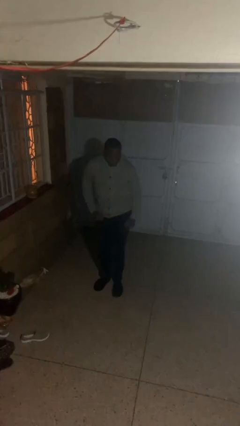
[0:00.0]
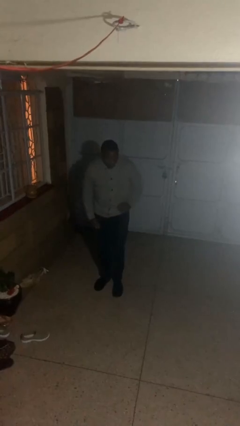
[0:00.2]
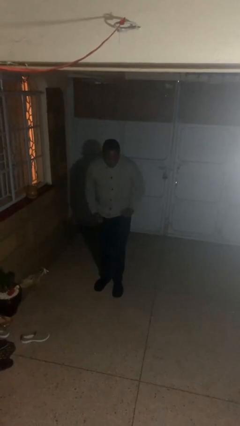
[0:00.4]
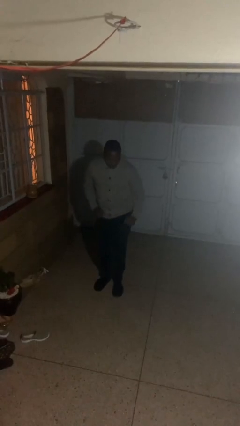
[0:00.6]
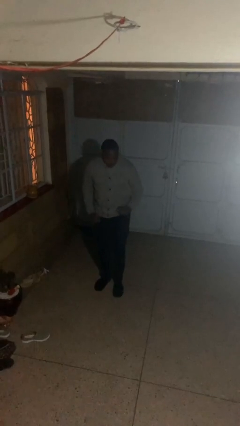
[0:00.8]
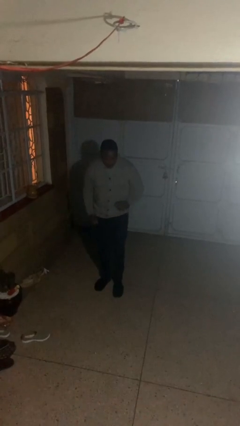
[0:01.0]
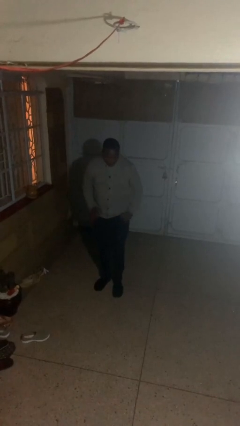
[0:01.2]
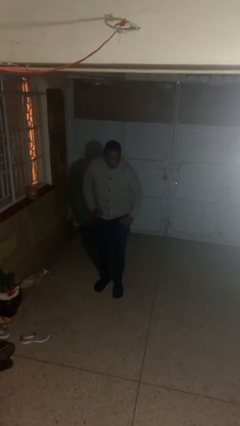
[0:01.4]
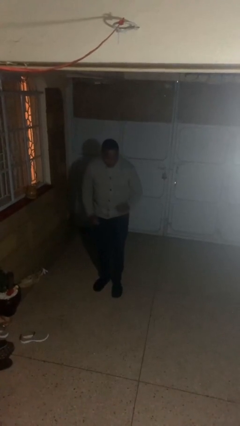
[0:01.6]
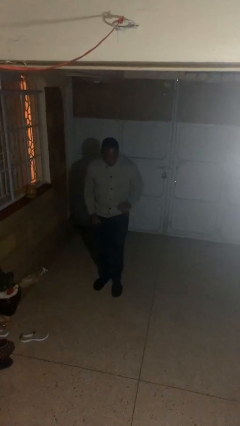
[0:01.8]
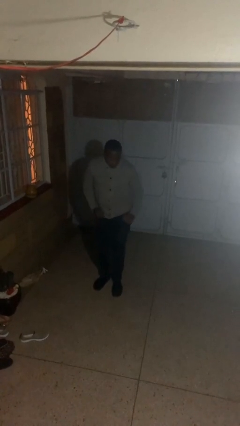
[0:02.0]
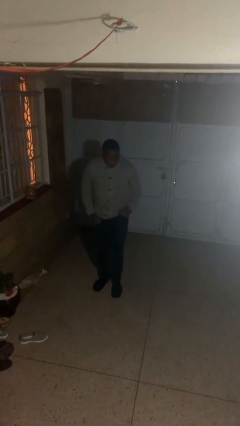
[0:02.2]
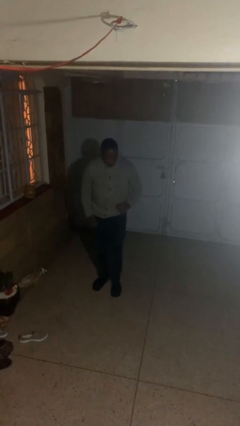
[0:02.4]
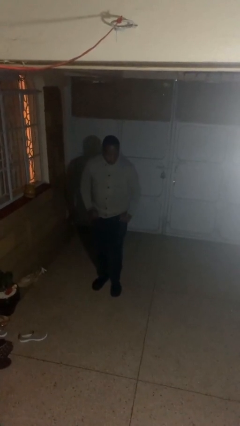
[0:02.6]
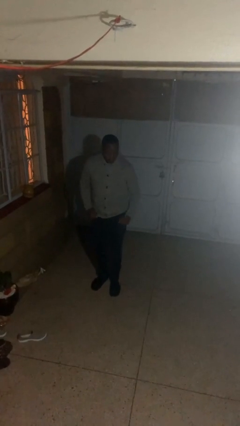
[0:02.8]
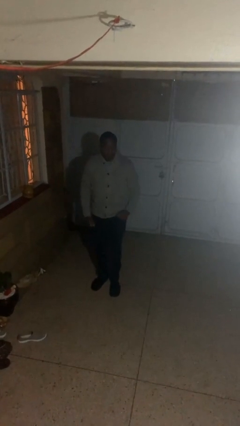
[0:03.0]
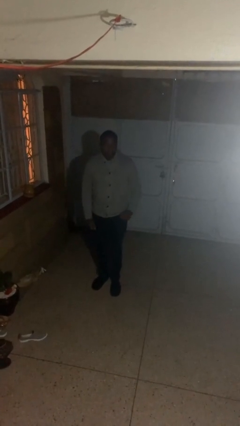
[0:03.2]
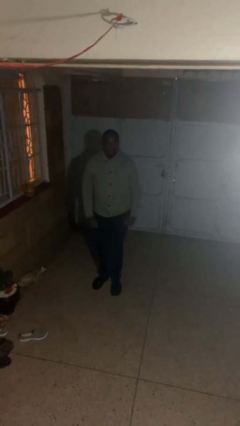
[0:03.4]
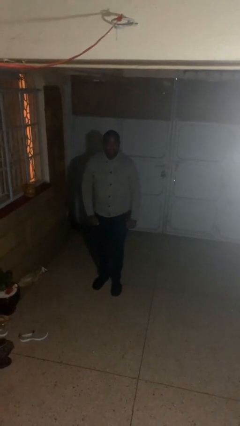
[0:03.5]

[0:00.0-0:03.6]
person dances in place

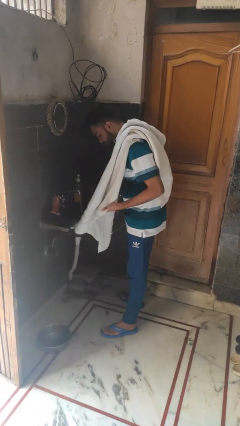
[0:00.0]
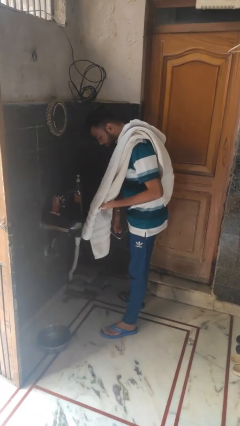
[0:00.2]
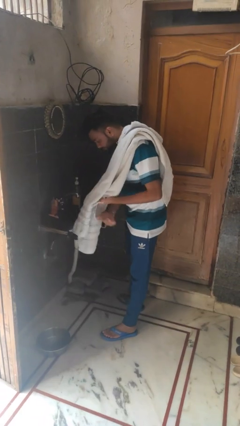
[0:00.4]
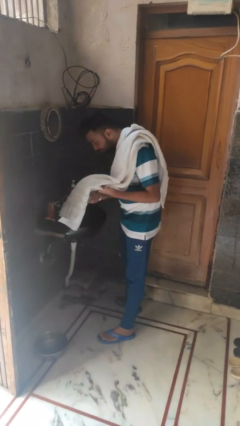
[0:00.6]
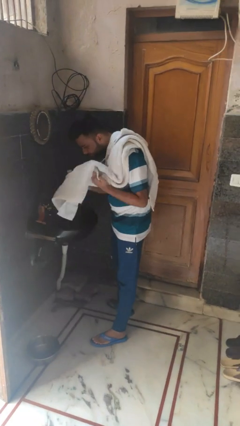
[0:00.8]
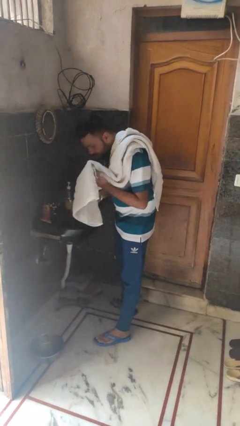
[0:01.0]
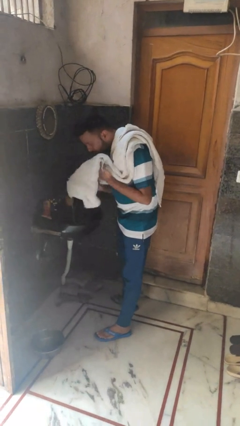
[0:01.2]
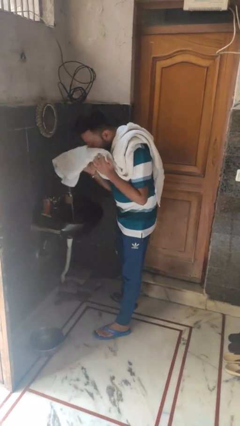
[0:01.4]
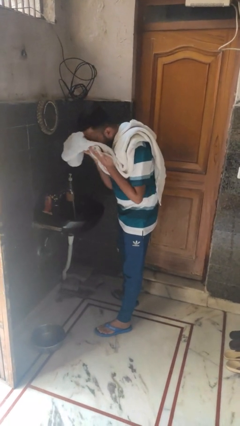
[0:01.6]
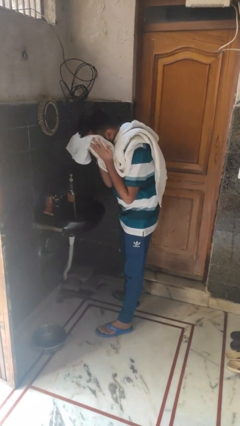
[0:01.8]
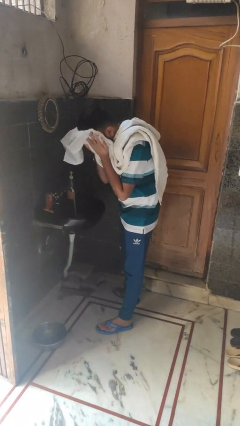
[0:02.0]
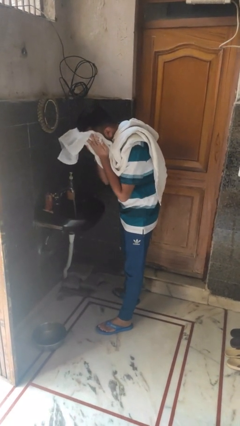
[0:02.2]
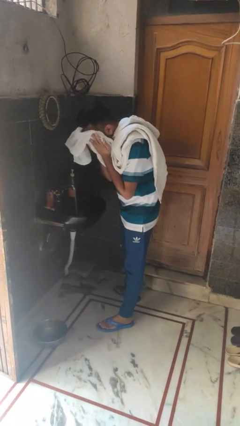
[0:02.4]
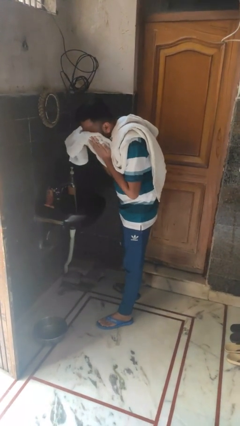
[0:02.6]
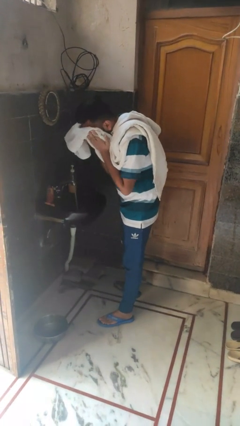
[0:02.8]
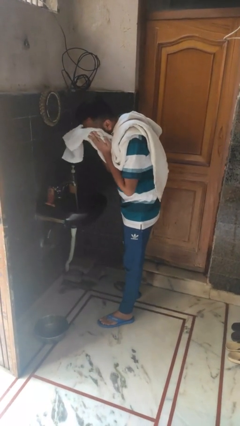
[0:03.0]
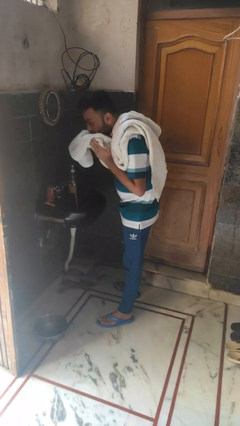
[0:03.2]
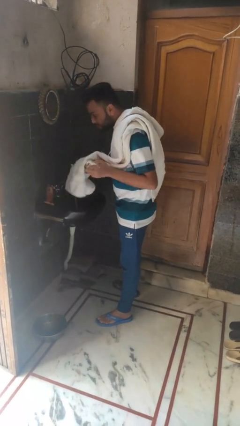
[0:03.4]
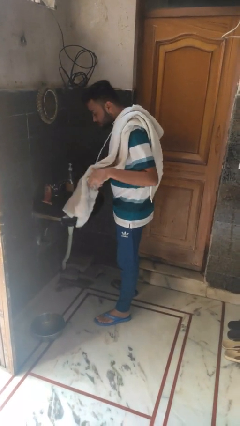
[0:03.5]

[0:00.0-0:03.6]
person dries face with towel

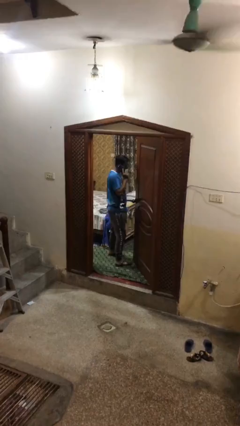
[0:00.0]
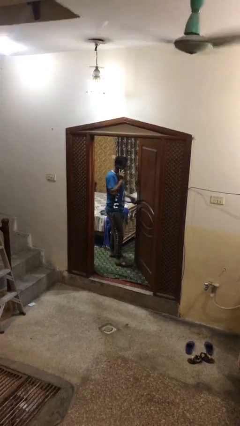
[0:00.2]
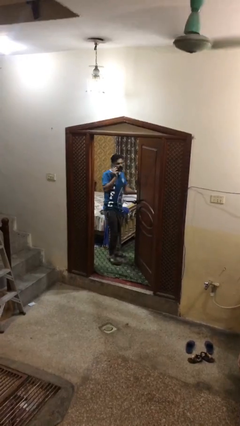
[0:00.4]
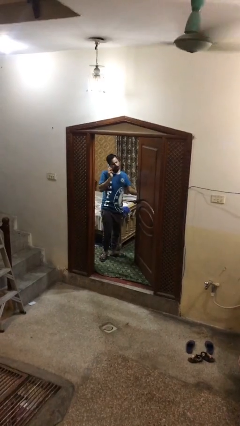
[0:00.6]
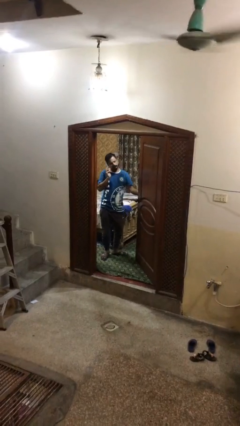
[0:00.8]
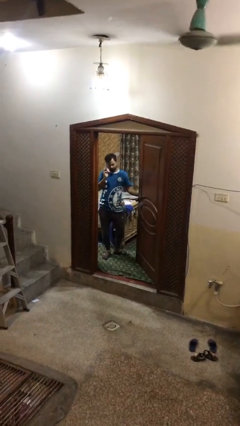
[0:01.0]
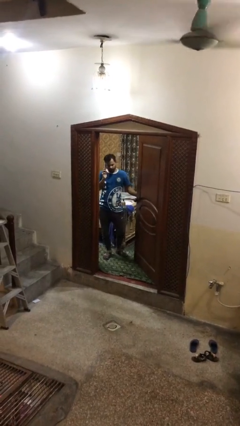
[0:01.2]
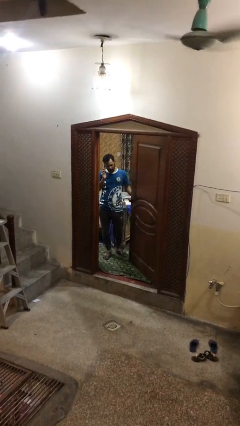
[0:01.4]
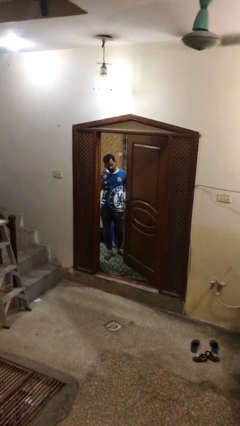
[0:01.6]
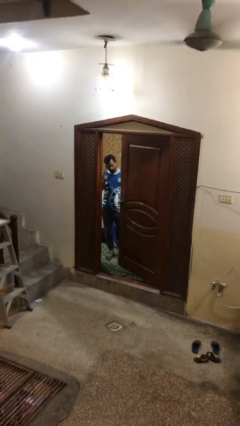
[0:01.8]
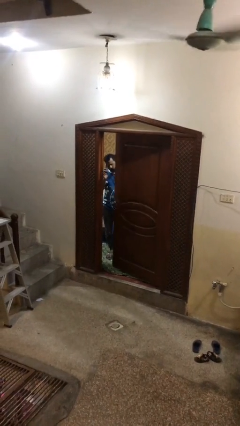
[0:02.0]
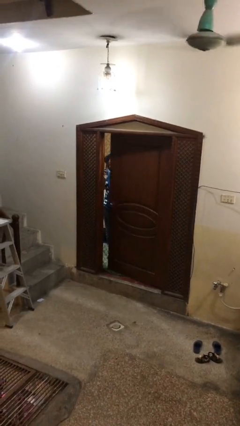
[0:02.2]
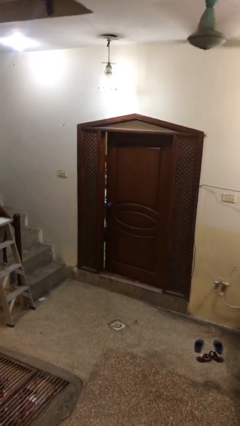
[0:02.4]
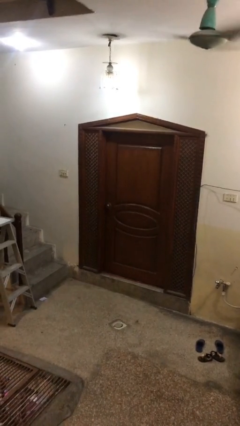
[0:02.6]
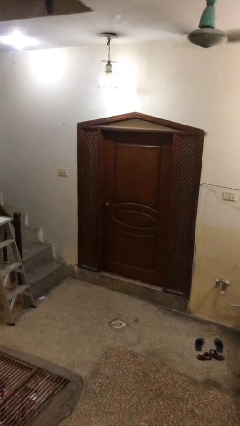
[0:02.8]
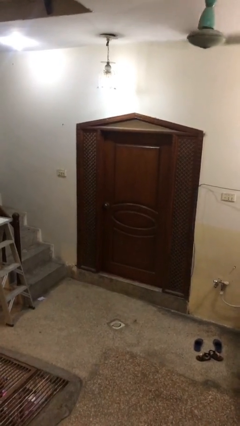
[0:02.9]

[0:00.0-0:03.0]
person closes facility door

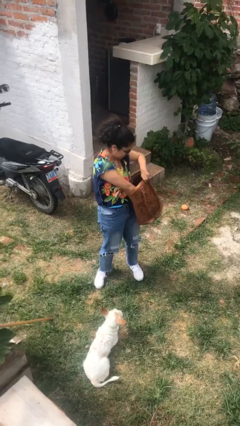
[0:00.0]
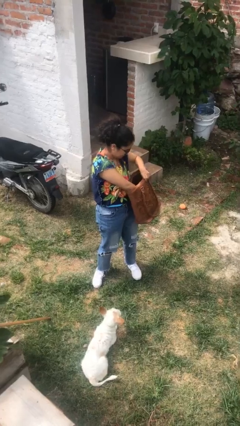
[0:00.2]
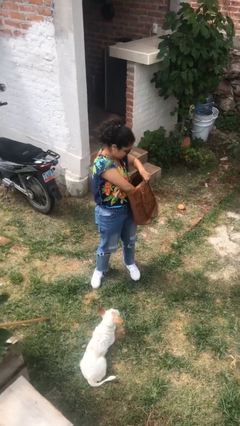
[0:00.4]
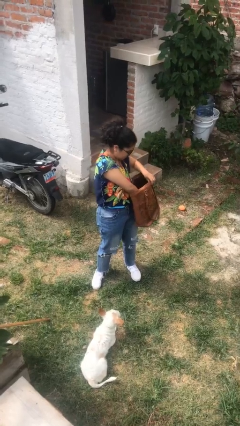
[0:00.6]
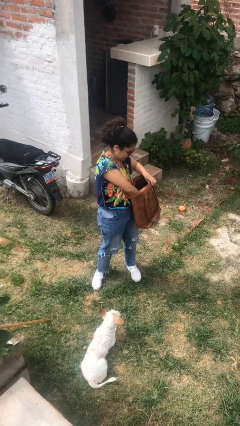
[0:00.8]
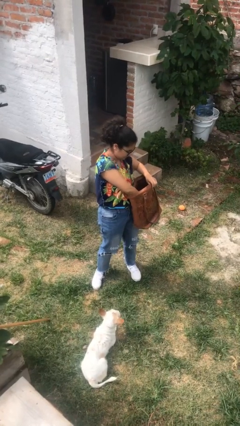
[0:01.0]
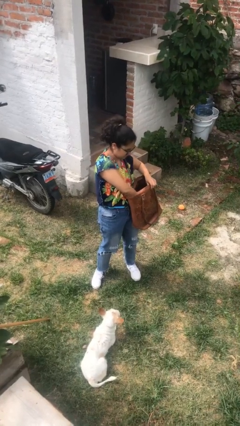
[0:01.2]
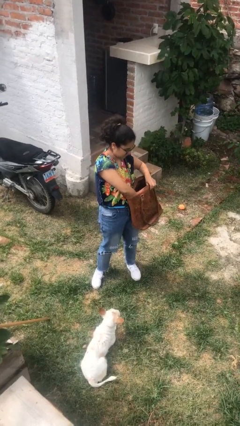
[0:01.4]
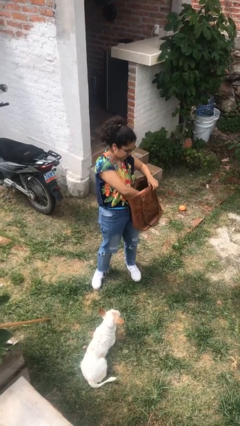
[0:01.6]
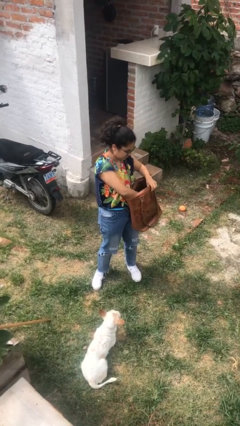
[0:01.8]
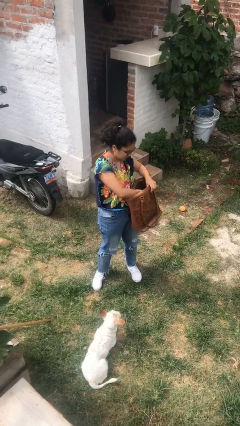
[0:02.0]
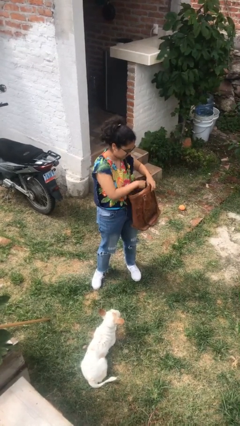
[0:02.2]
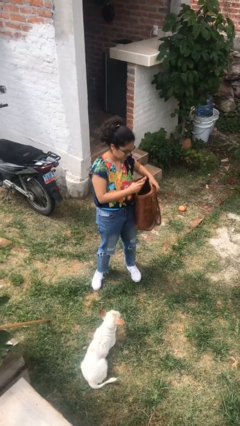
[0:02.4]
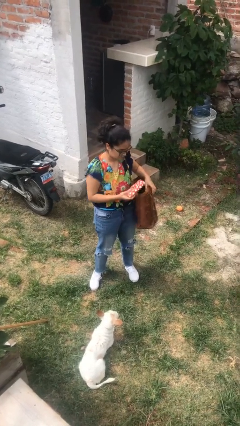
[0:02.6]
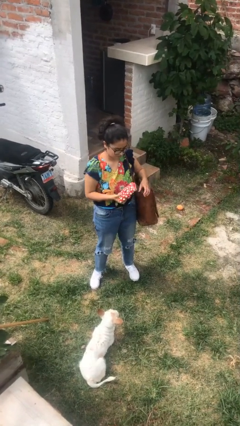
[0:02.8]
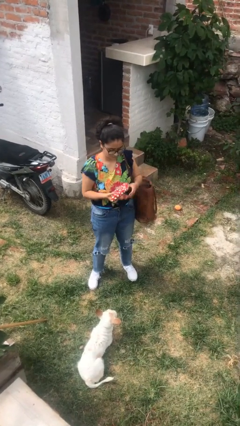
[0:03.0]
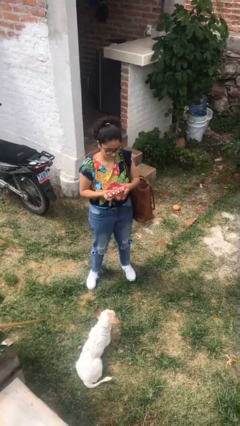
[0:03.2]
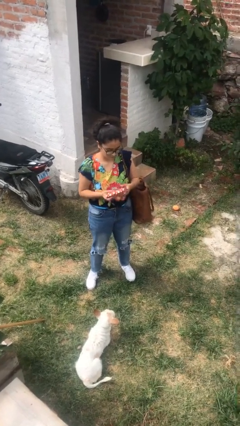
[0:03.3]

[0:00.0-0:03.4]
person takes object from purse

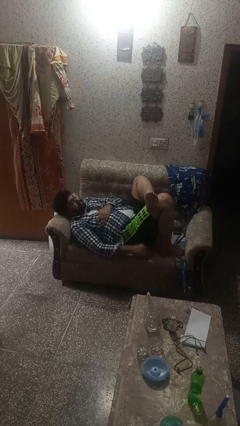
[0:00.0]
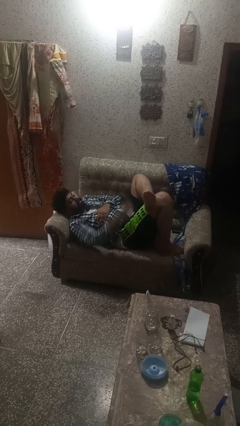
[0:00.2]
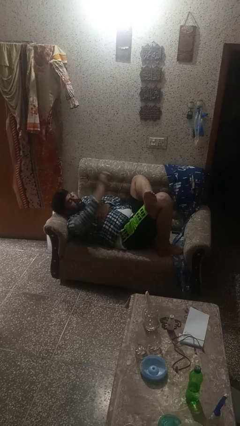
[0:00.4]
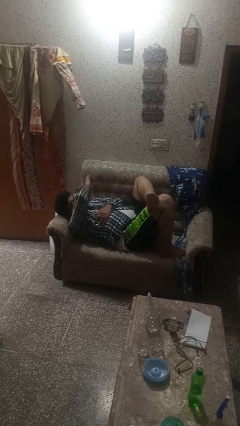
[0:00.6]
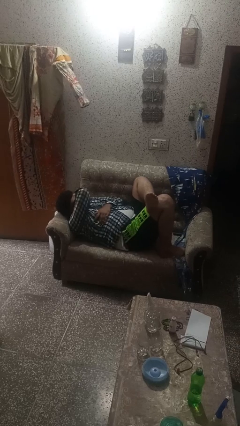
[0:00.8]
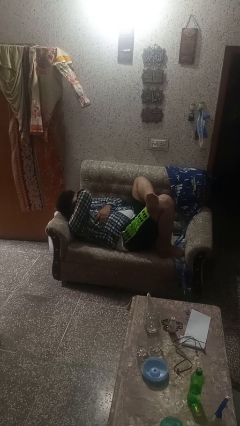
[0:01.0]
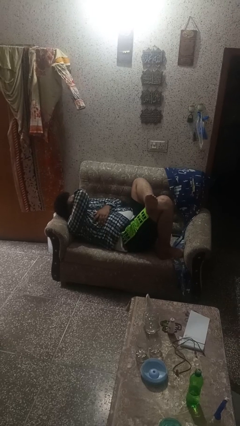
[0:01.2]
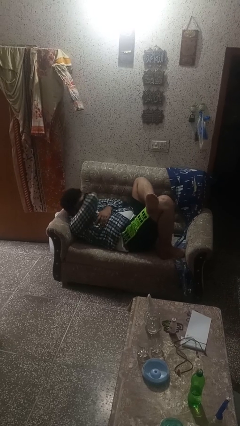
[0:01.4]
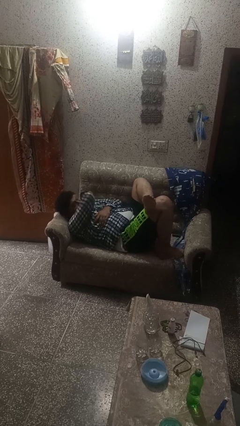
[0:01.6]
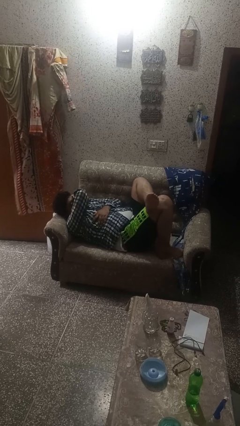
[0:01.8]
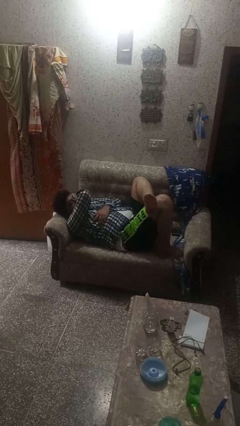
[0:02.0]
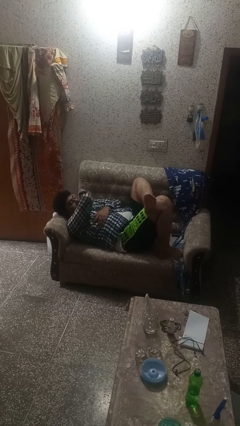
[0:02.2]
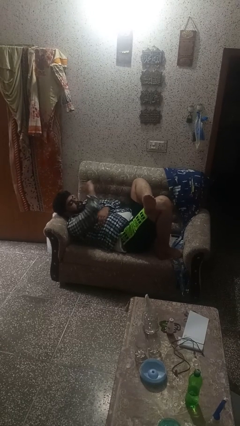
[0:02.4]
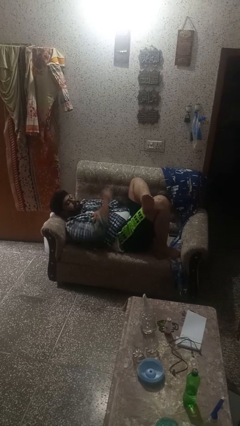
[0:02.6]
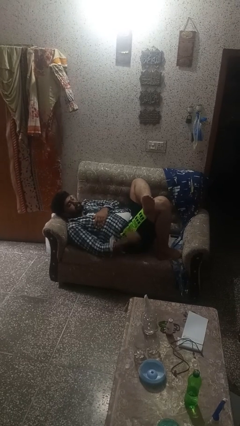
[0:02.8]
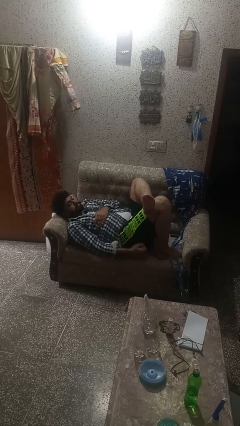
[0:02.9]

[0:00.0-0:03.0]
person sneezes into arm

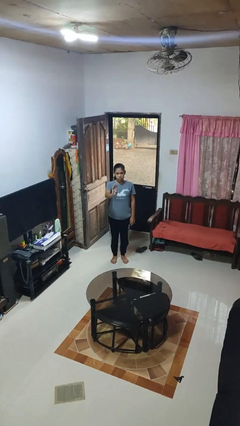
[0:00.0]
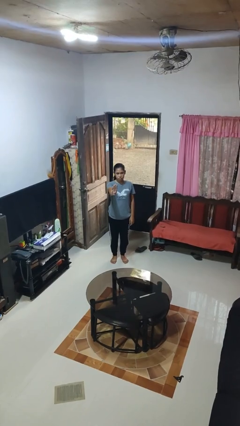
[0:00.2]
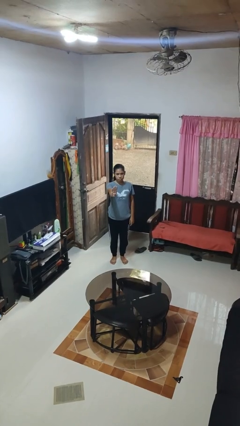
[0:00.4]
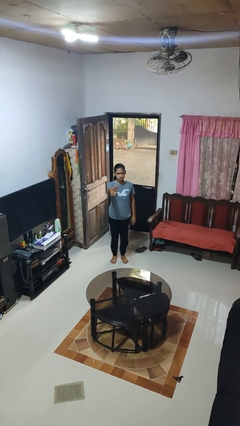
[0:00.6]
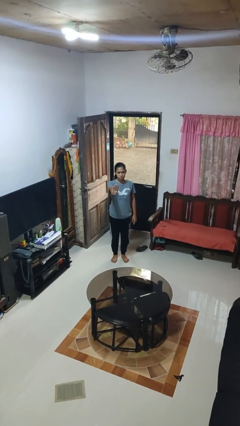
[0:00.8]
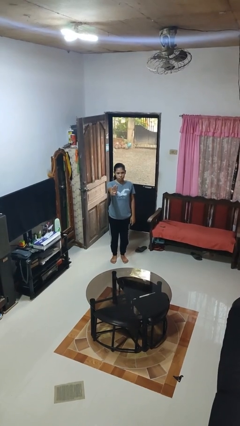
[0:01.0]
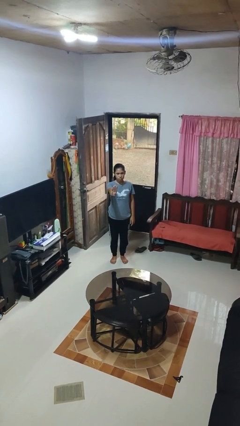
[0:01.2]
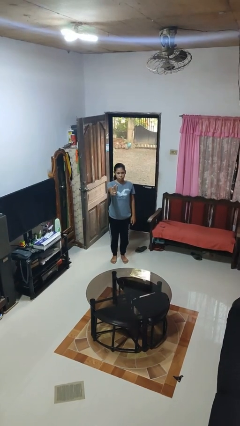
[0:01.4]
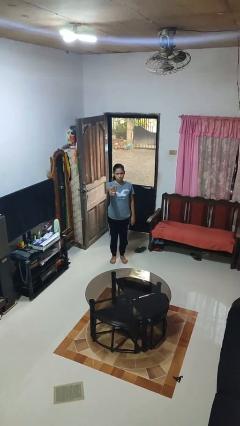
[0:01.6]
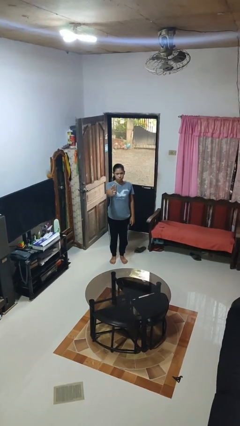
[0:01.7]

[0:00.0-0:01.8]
person gestures number four
